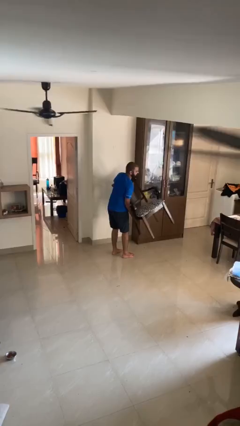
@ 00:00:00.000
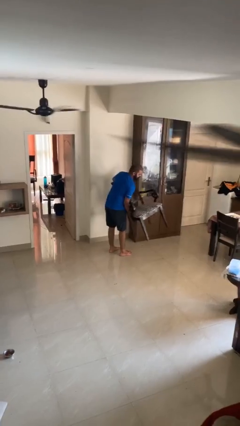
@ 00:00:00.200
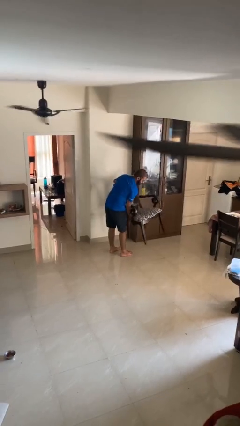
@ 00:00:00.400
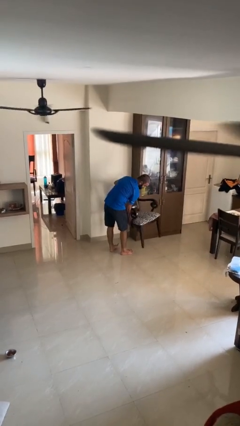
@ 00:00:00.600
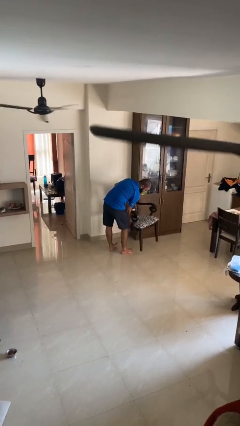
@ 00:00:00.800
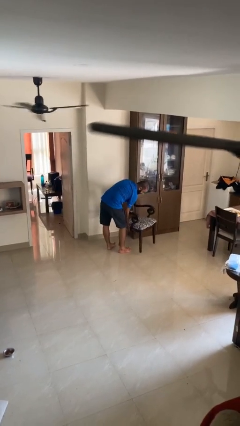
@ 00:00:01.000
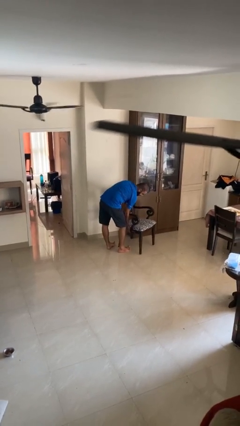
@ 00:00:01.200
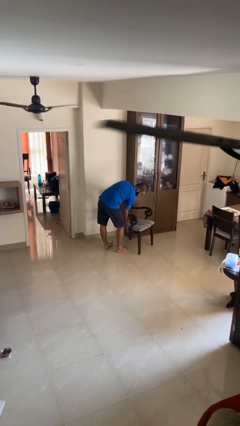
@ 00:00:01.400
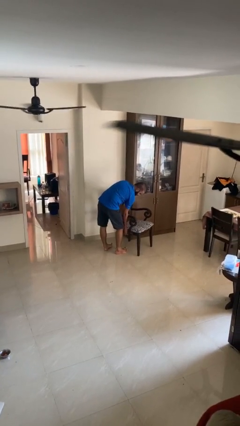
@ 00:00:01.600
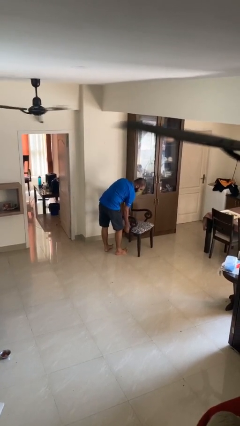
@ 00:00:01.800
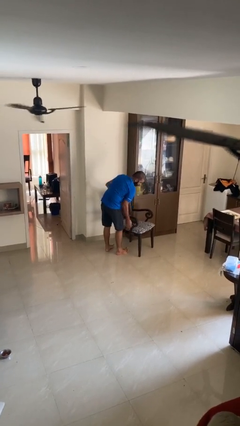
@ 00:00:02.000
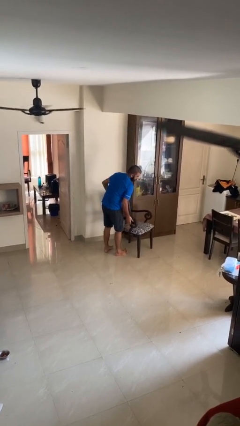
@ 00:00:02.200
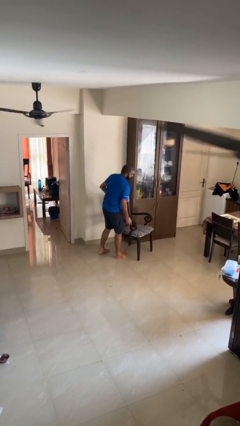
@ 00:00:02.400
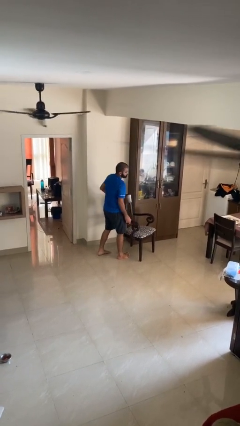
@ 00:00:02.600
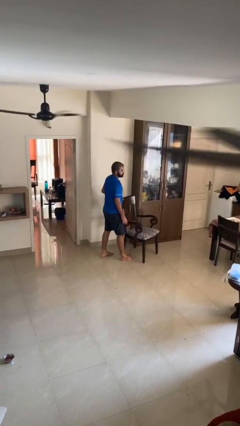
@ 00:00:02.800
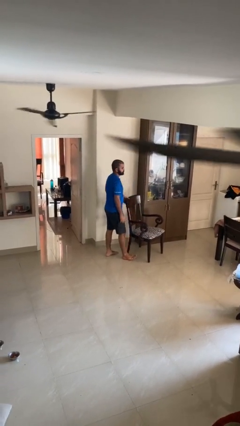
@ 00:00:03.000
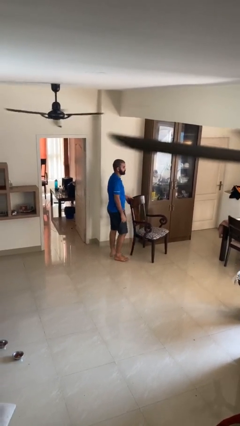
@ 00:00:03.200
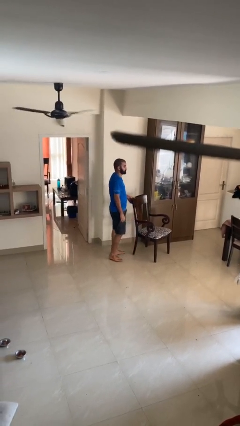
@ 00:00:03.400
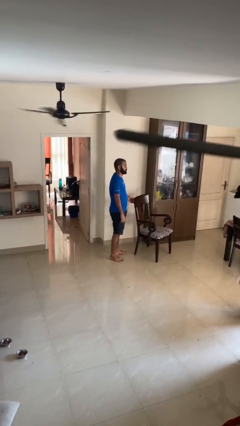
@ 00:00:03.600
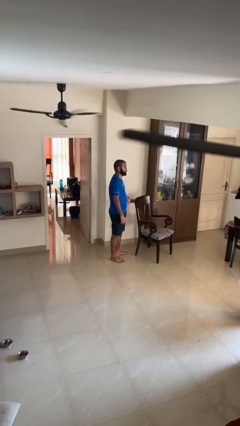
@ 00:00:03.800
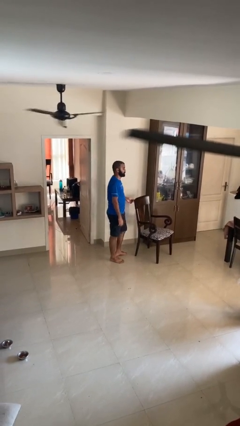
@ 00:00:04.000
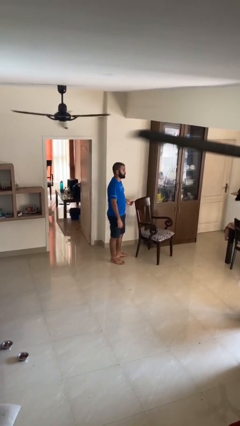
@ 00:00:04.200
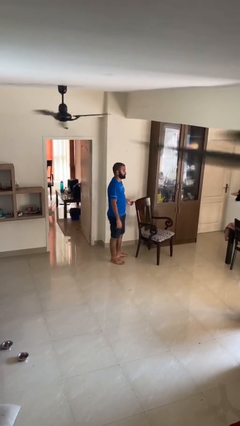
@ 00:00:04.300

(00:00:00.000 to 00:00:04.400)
person puts down object on floor

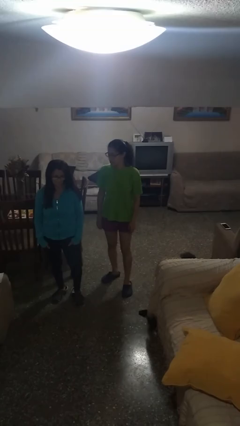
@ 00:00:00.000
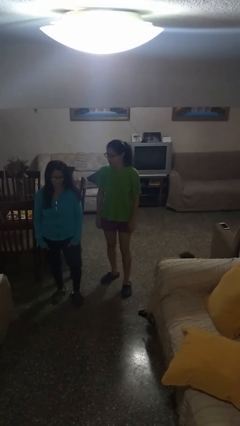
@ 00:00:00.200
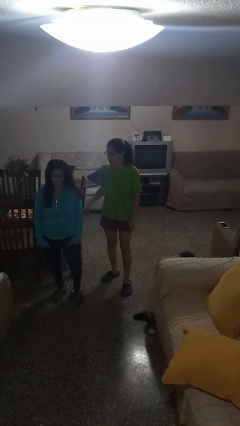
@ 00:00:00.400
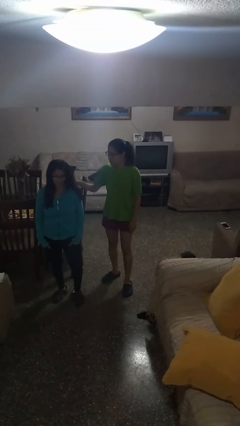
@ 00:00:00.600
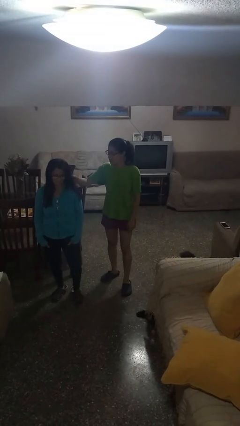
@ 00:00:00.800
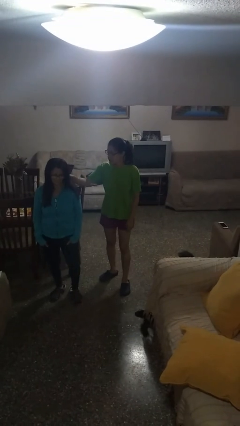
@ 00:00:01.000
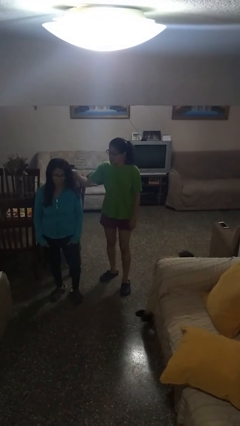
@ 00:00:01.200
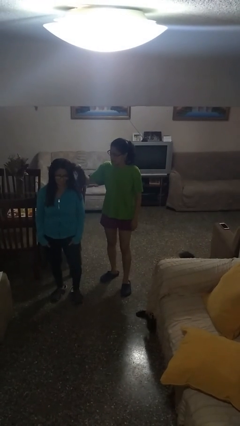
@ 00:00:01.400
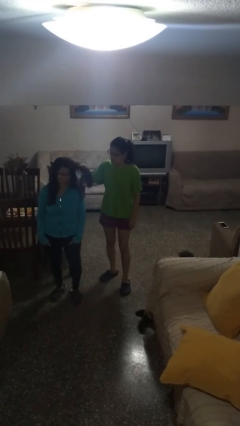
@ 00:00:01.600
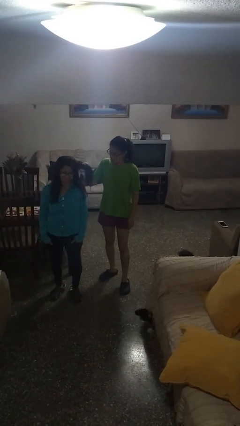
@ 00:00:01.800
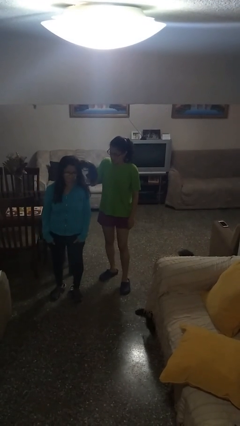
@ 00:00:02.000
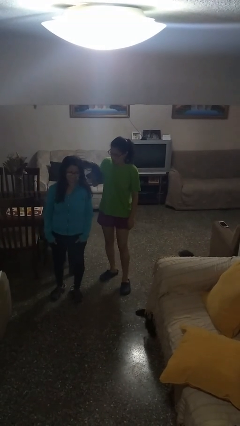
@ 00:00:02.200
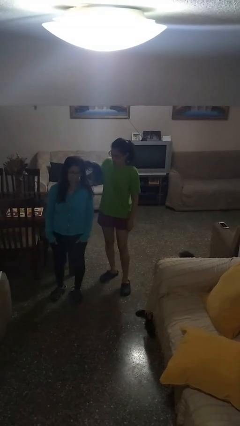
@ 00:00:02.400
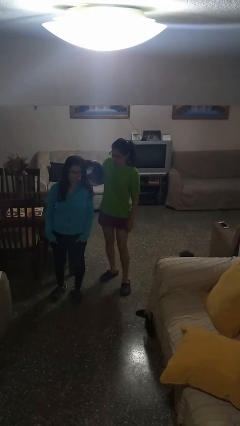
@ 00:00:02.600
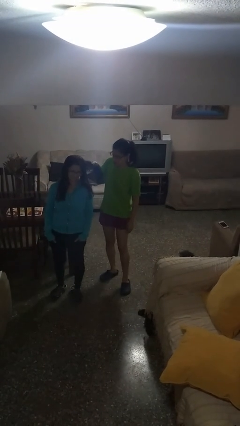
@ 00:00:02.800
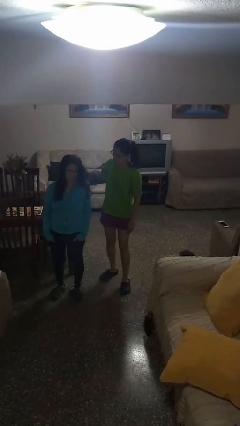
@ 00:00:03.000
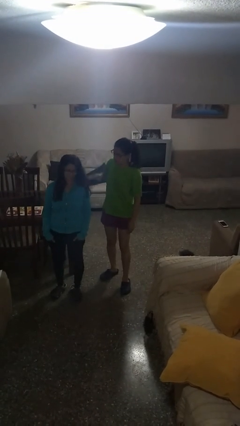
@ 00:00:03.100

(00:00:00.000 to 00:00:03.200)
person grabs person by hair

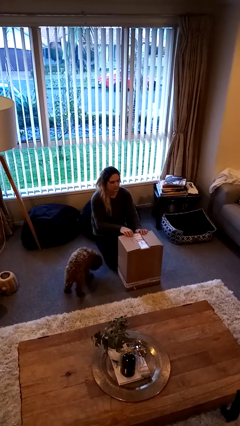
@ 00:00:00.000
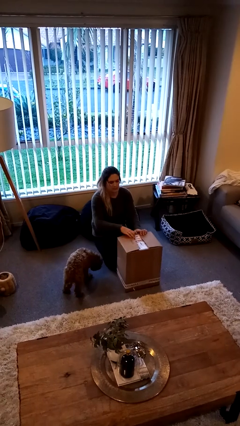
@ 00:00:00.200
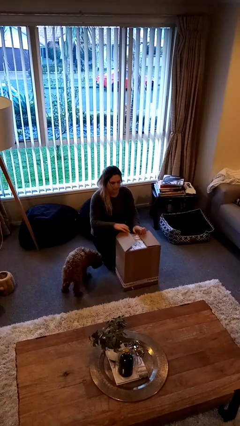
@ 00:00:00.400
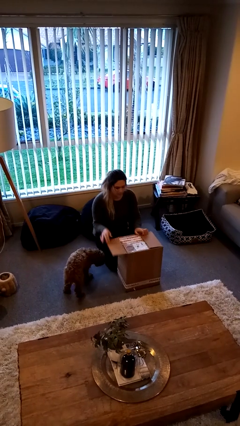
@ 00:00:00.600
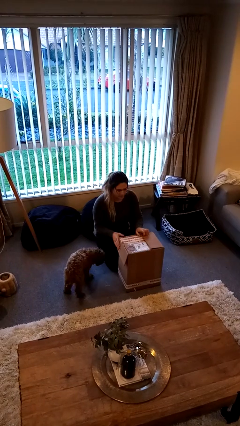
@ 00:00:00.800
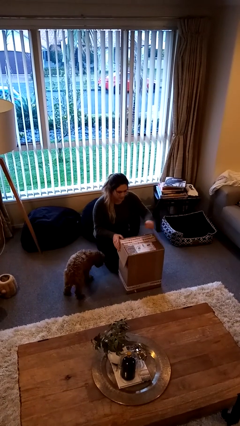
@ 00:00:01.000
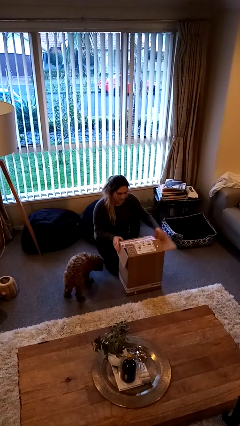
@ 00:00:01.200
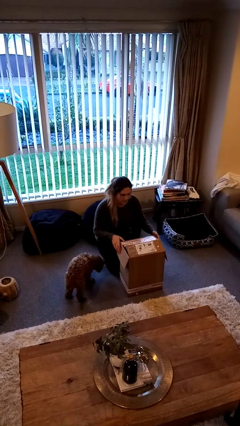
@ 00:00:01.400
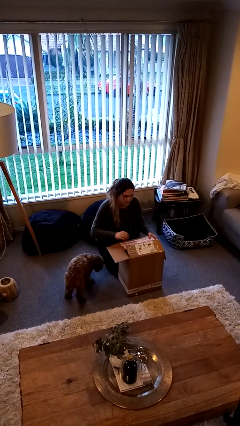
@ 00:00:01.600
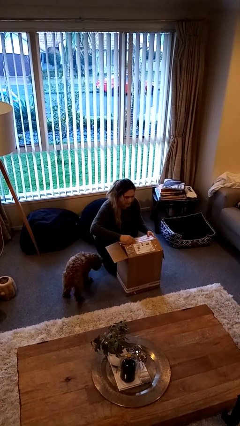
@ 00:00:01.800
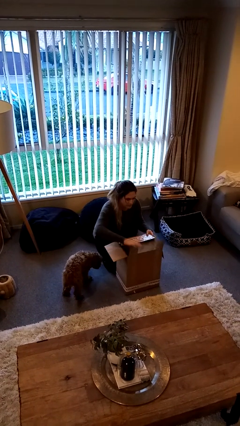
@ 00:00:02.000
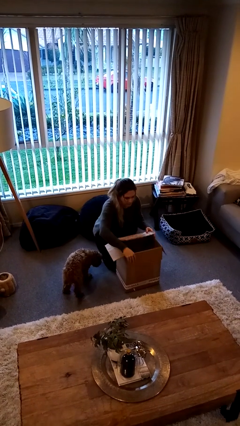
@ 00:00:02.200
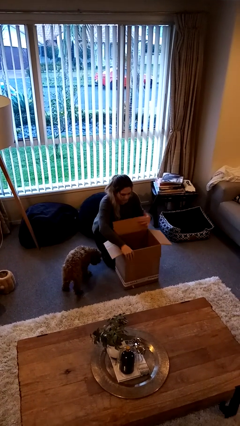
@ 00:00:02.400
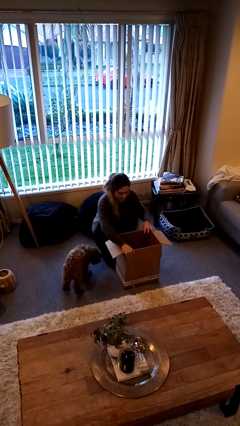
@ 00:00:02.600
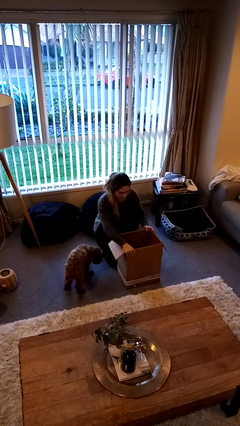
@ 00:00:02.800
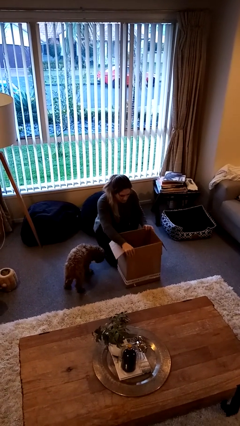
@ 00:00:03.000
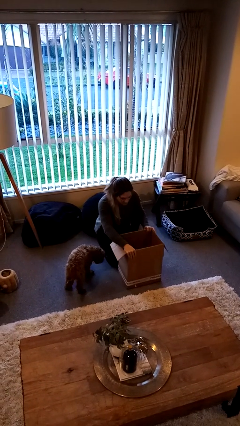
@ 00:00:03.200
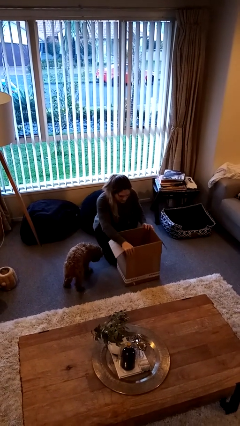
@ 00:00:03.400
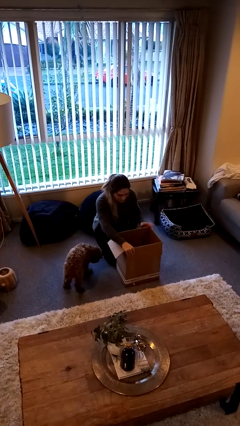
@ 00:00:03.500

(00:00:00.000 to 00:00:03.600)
person opens box

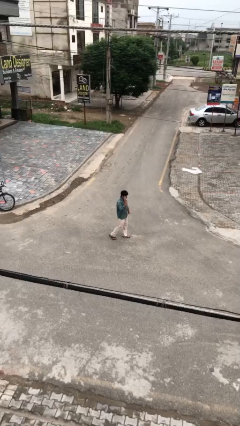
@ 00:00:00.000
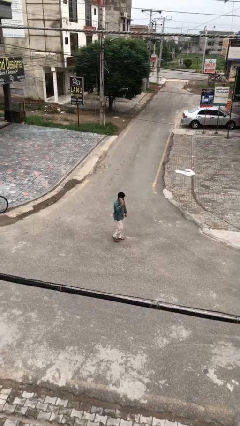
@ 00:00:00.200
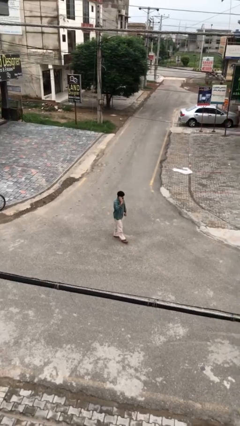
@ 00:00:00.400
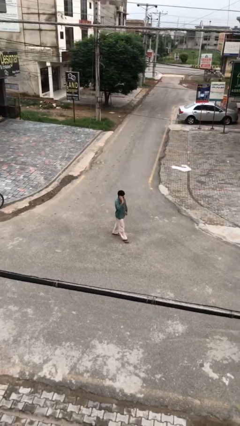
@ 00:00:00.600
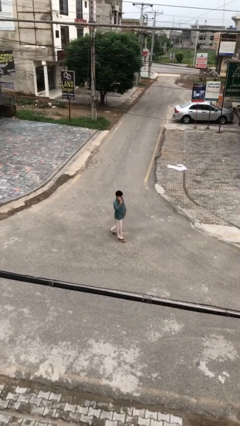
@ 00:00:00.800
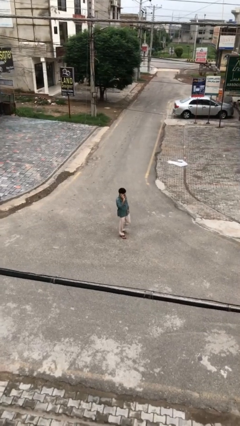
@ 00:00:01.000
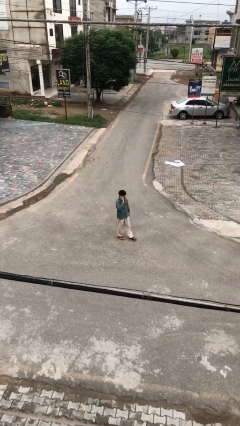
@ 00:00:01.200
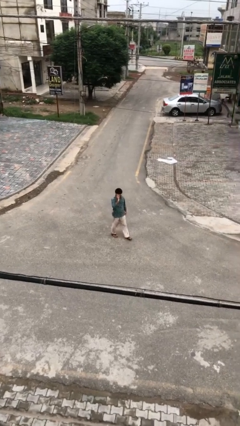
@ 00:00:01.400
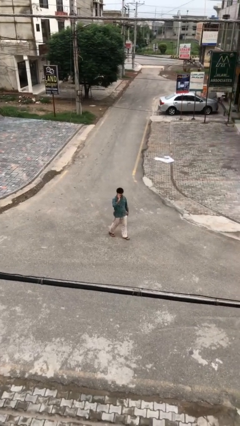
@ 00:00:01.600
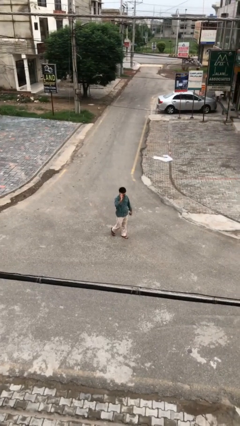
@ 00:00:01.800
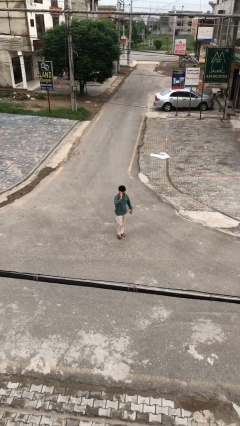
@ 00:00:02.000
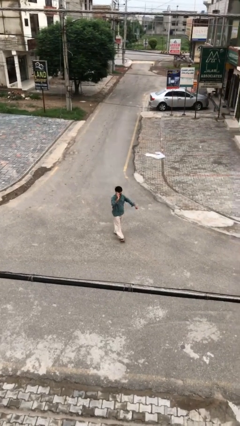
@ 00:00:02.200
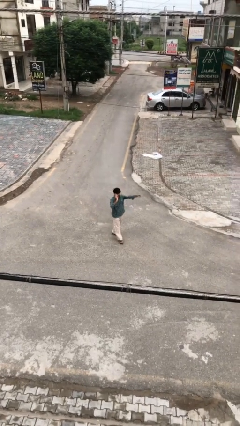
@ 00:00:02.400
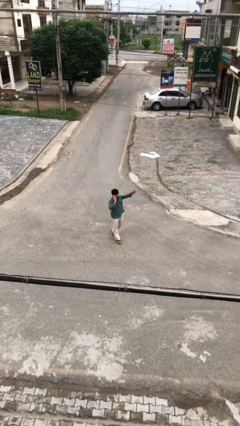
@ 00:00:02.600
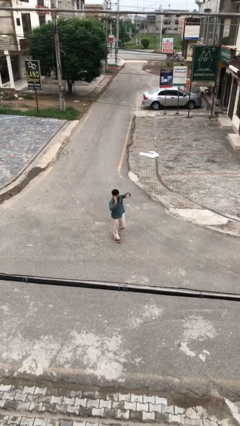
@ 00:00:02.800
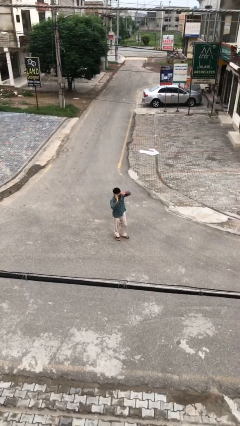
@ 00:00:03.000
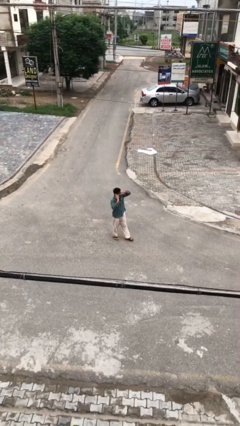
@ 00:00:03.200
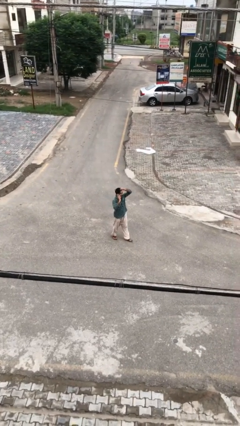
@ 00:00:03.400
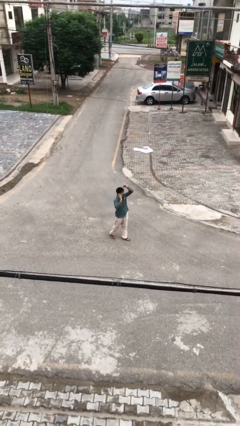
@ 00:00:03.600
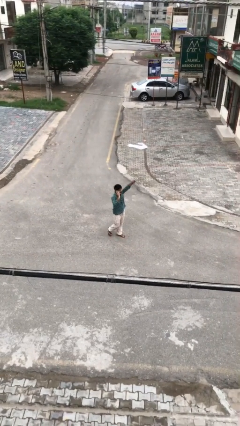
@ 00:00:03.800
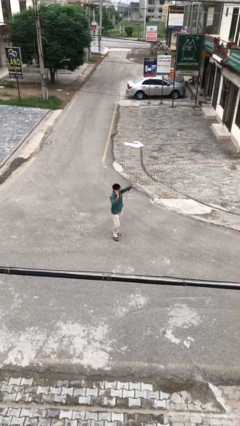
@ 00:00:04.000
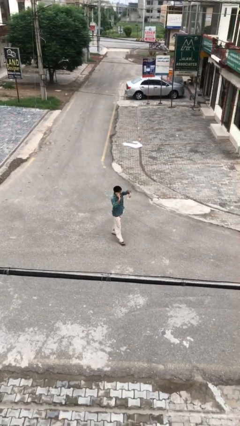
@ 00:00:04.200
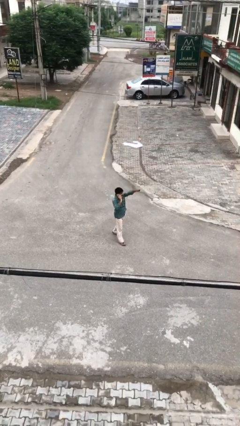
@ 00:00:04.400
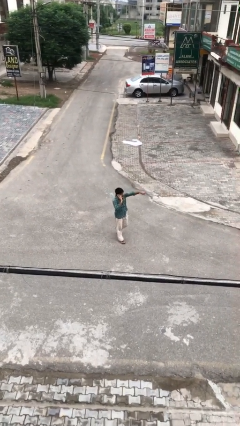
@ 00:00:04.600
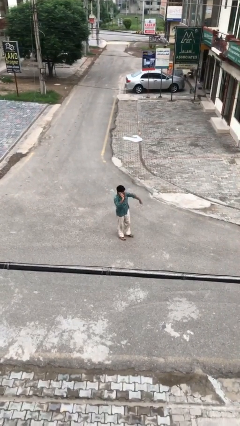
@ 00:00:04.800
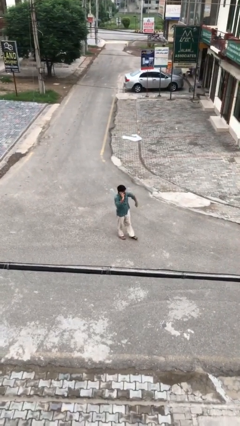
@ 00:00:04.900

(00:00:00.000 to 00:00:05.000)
person talks on phone

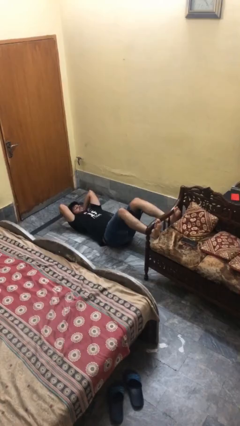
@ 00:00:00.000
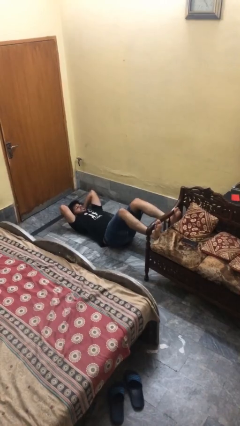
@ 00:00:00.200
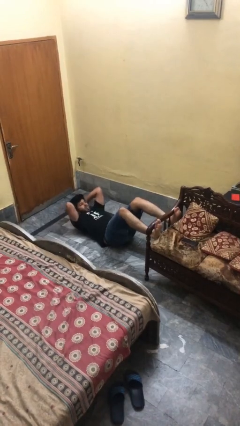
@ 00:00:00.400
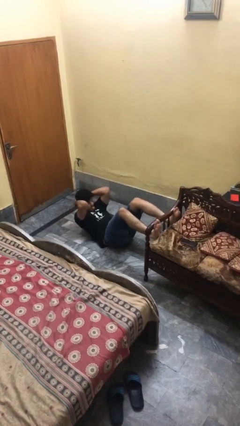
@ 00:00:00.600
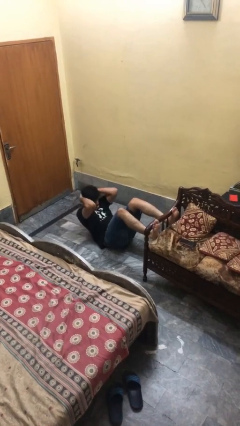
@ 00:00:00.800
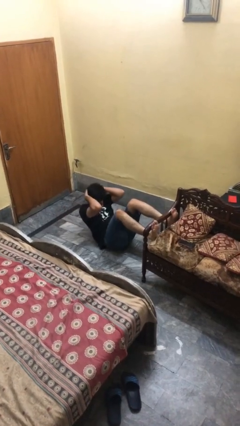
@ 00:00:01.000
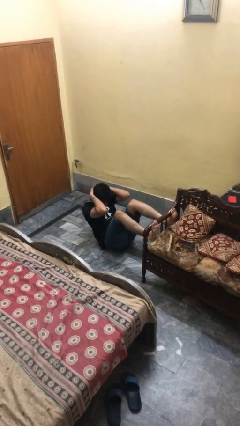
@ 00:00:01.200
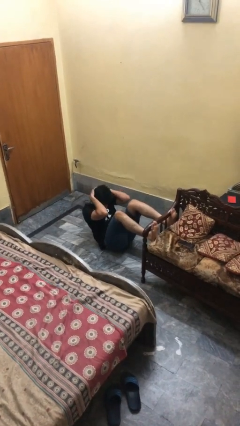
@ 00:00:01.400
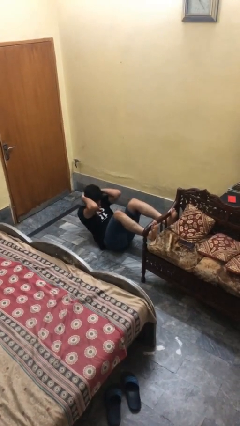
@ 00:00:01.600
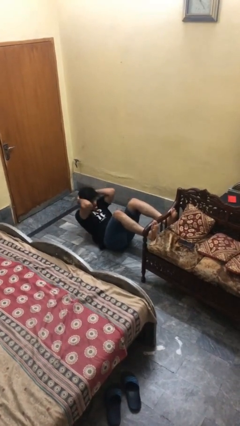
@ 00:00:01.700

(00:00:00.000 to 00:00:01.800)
person exercises with situp
